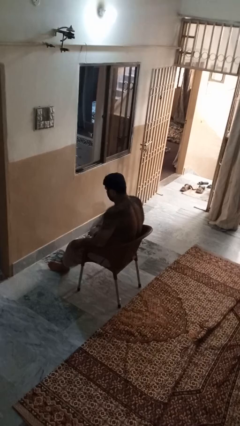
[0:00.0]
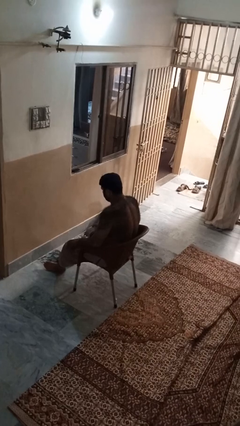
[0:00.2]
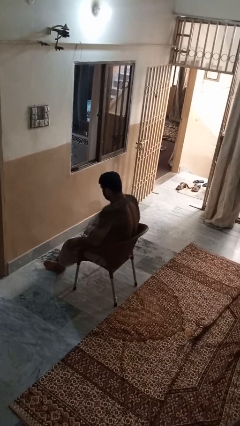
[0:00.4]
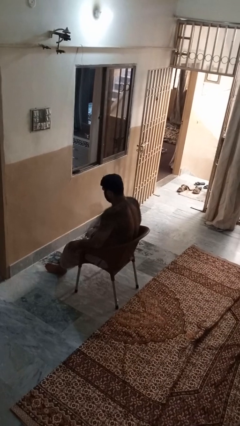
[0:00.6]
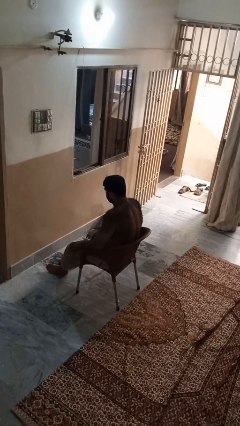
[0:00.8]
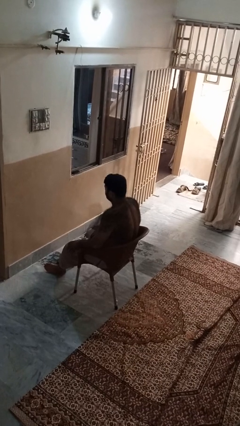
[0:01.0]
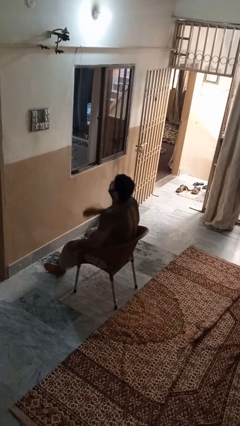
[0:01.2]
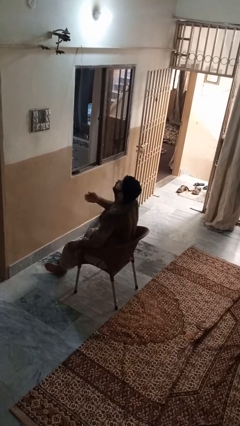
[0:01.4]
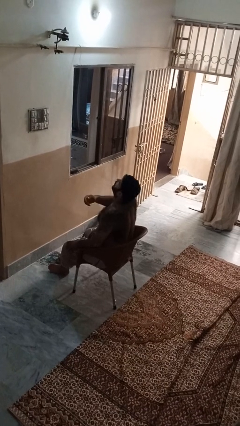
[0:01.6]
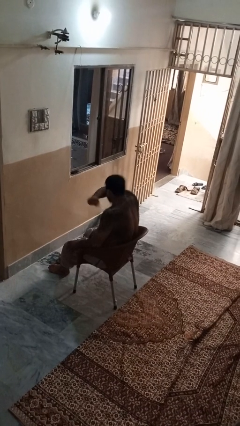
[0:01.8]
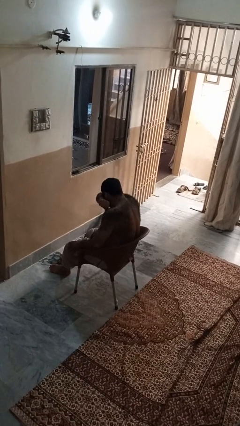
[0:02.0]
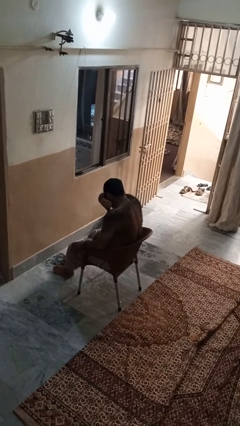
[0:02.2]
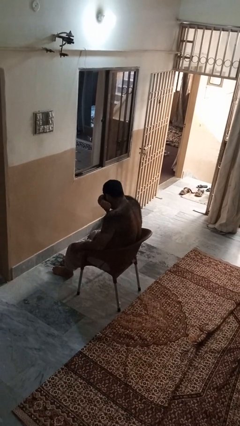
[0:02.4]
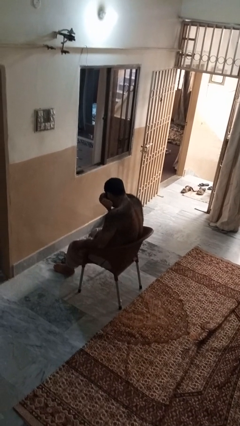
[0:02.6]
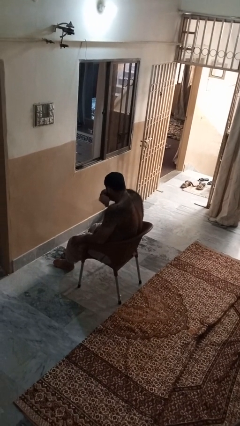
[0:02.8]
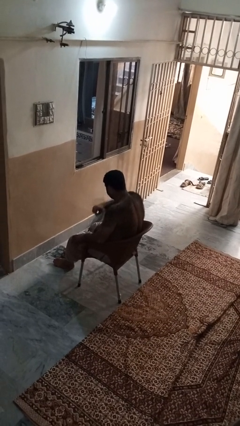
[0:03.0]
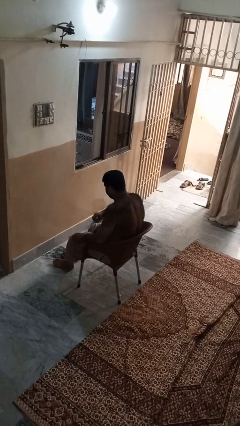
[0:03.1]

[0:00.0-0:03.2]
person sneezes into arm

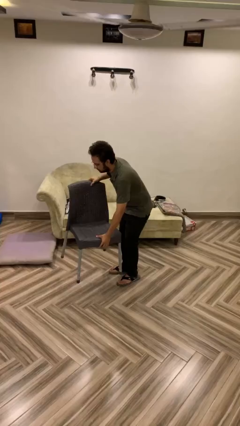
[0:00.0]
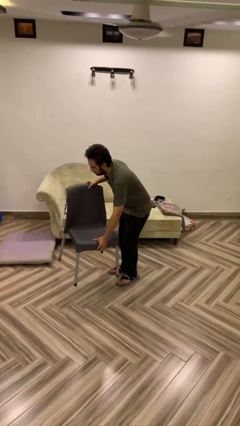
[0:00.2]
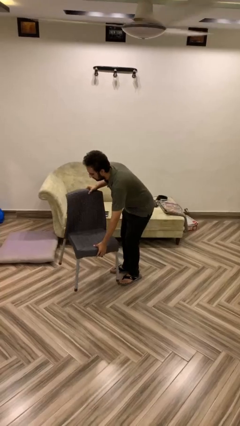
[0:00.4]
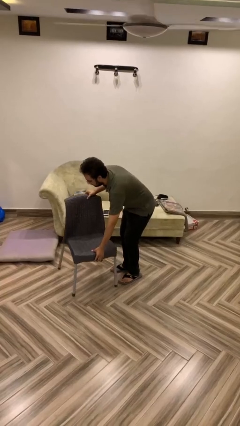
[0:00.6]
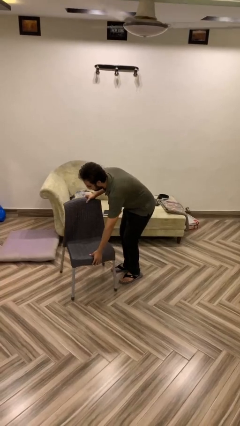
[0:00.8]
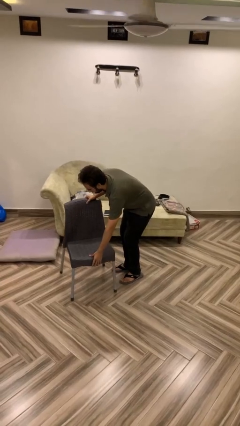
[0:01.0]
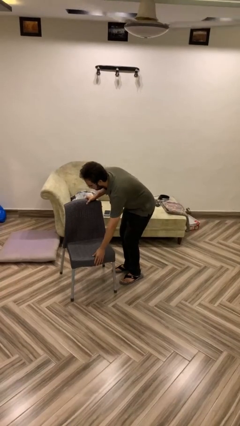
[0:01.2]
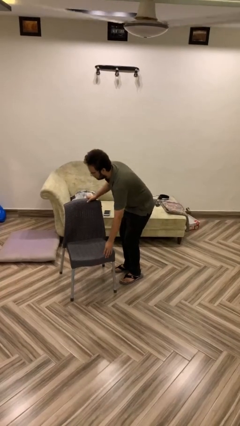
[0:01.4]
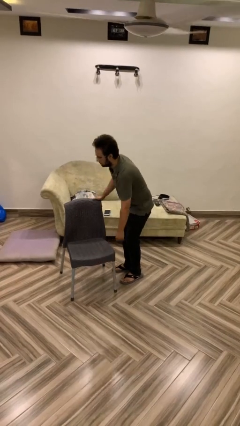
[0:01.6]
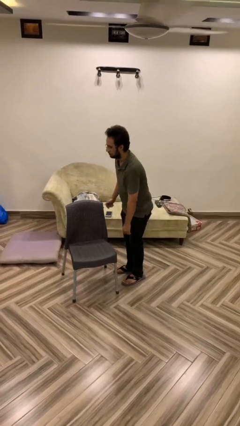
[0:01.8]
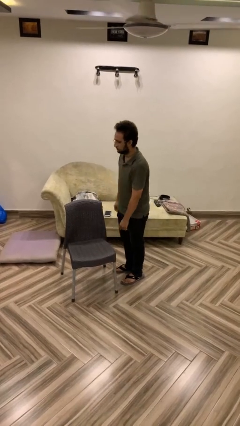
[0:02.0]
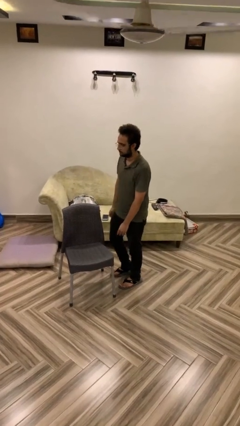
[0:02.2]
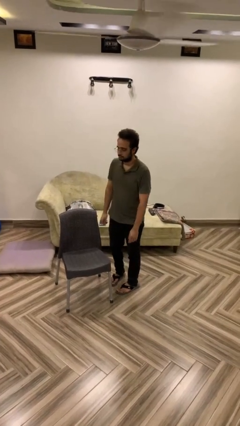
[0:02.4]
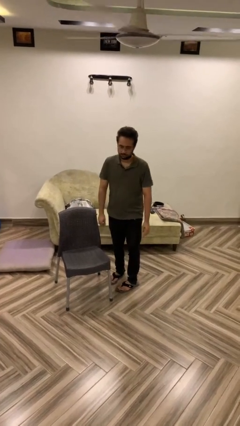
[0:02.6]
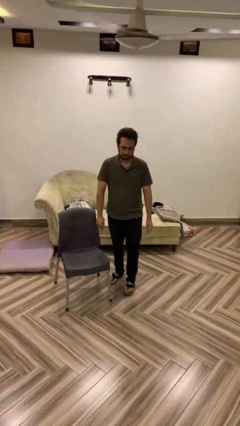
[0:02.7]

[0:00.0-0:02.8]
person puts down object on floor

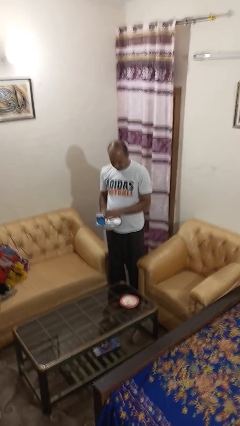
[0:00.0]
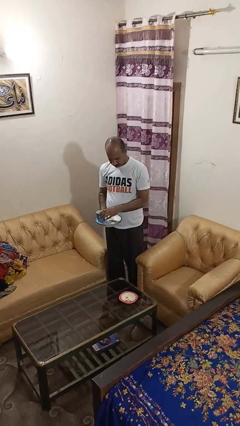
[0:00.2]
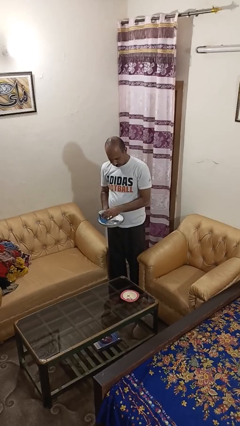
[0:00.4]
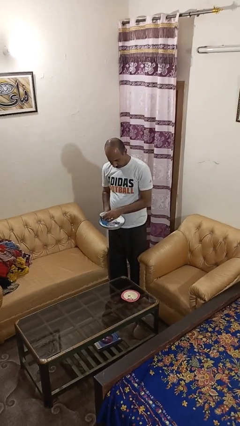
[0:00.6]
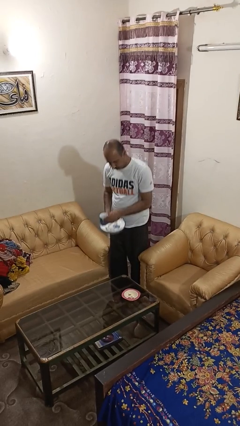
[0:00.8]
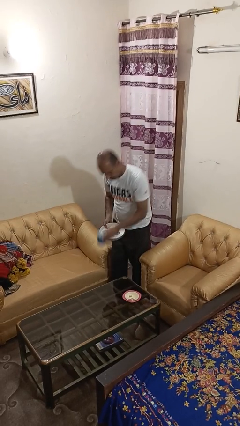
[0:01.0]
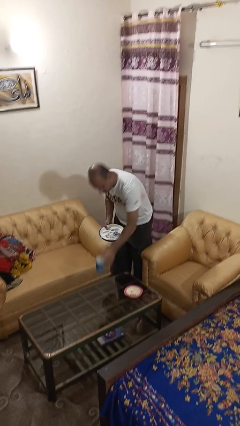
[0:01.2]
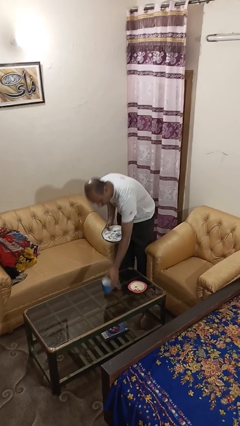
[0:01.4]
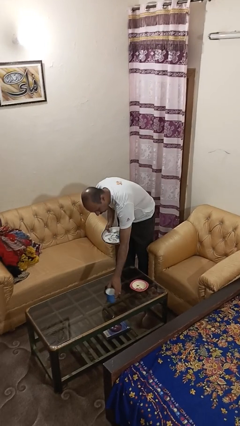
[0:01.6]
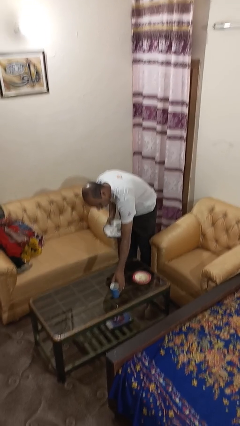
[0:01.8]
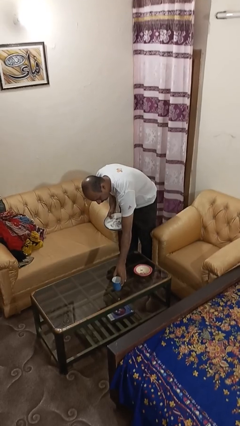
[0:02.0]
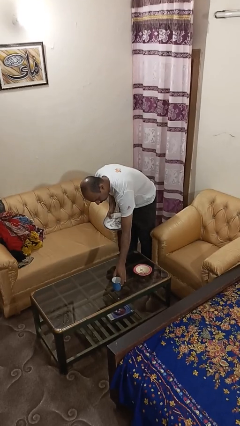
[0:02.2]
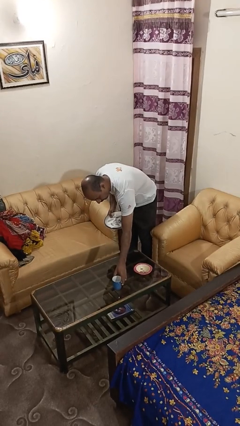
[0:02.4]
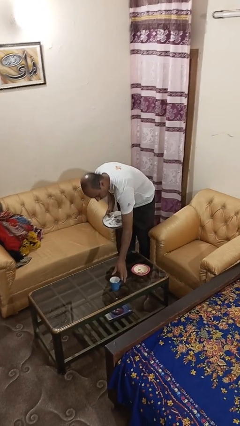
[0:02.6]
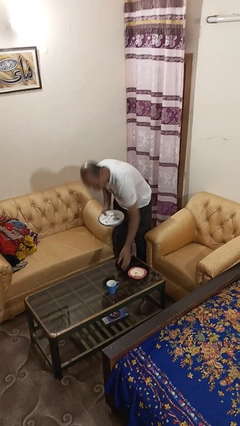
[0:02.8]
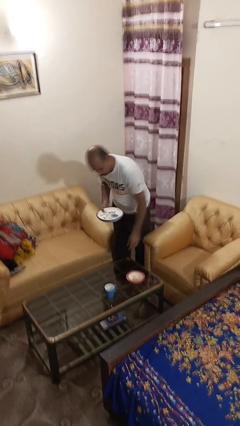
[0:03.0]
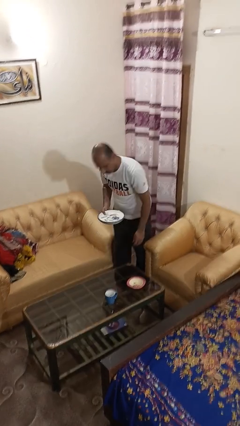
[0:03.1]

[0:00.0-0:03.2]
person sets table

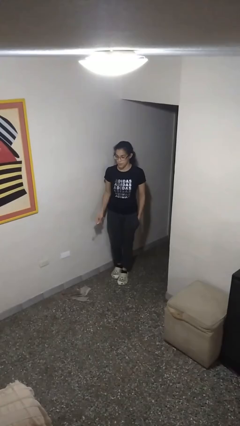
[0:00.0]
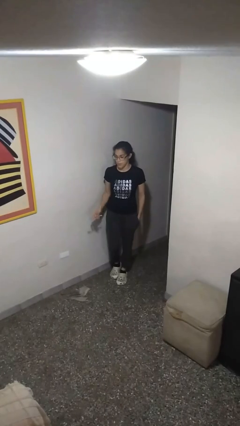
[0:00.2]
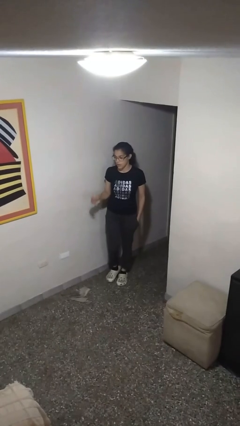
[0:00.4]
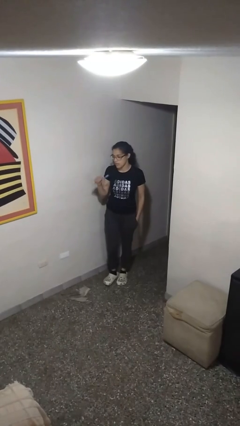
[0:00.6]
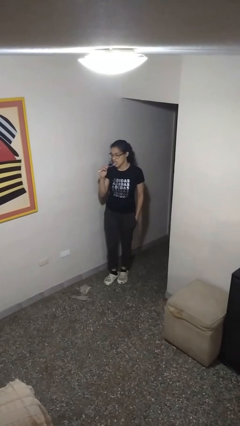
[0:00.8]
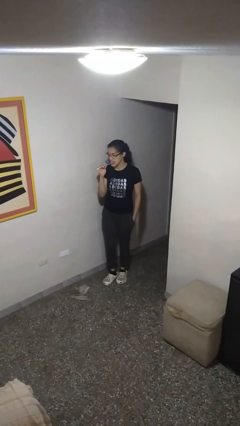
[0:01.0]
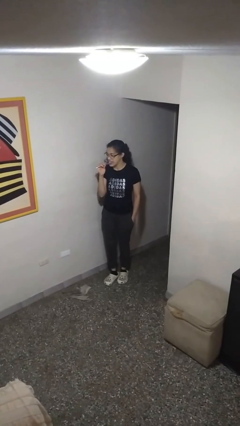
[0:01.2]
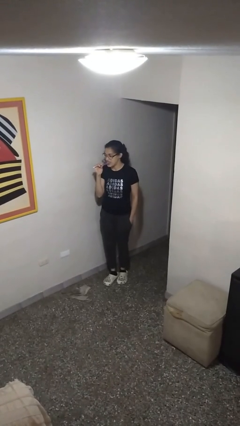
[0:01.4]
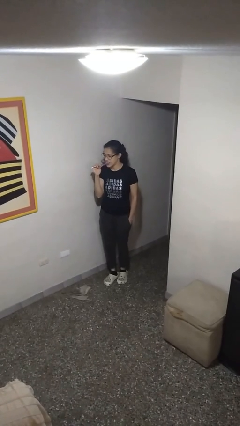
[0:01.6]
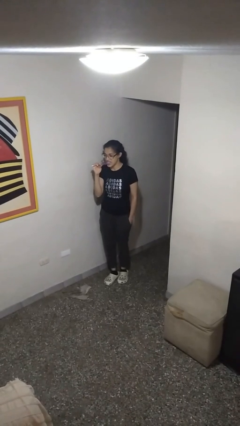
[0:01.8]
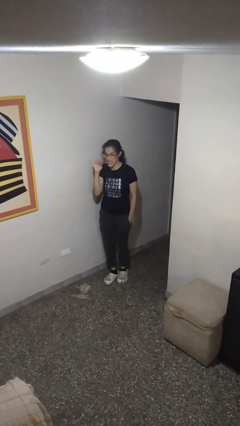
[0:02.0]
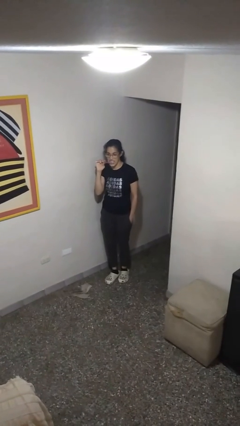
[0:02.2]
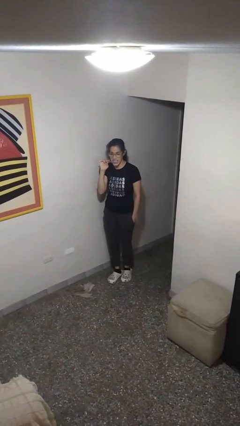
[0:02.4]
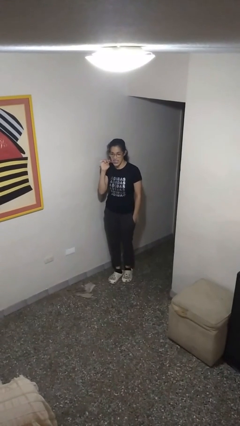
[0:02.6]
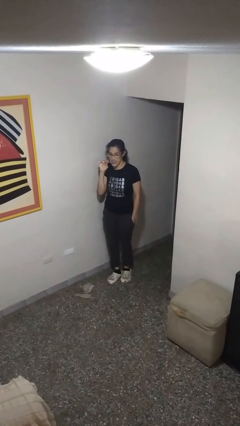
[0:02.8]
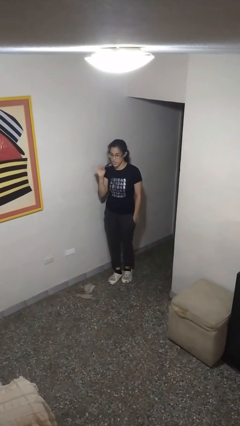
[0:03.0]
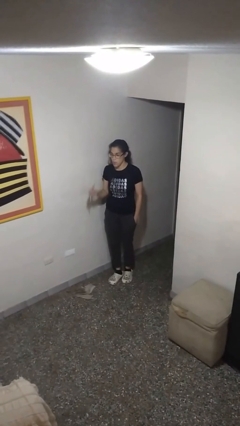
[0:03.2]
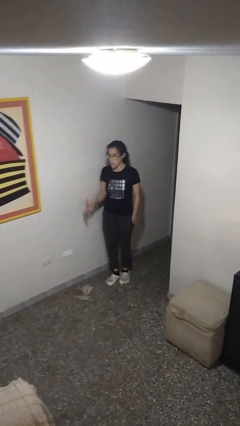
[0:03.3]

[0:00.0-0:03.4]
person brushes teeth

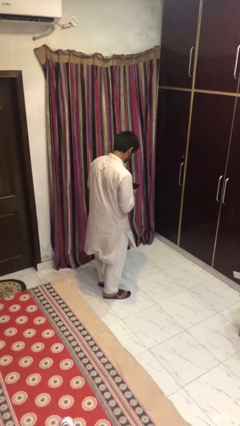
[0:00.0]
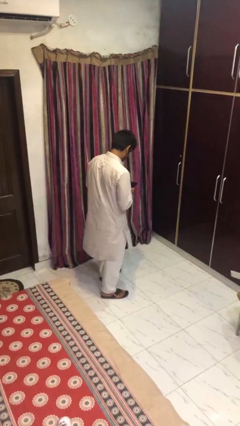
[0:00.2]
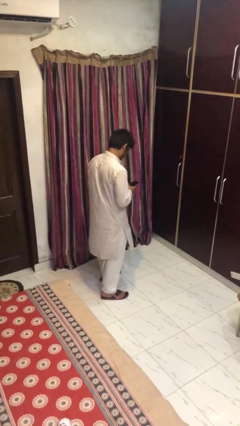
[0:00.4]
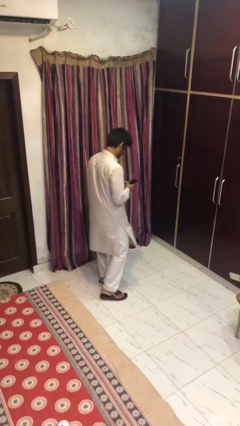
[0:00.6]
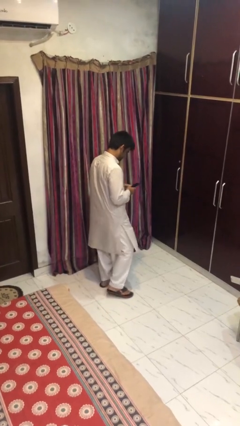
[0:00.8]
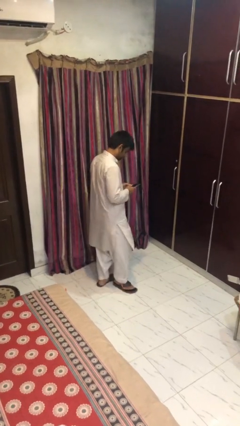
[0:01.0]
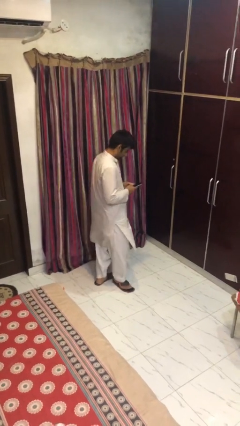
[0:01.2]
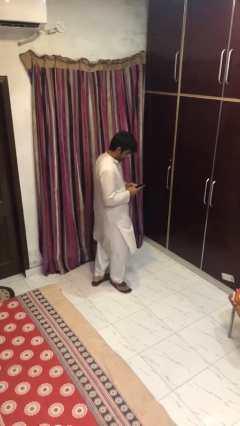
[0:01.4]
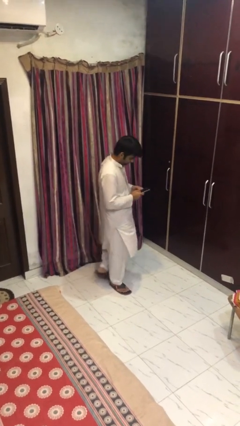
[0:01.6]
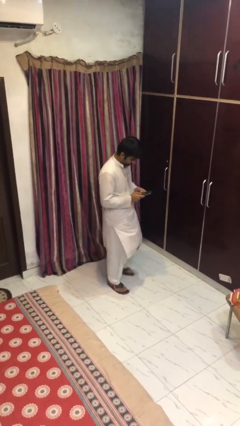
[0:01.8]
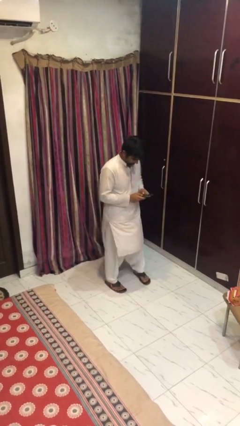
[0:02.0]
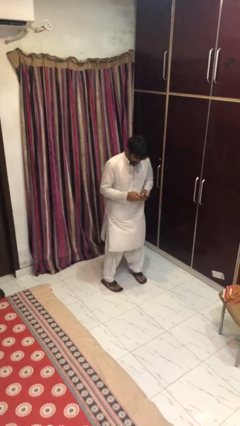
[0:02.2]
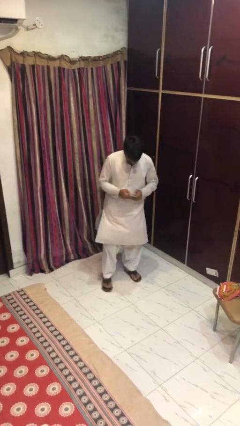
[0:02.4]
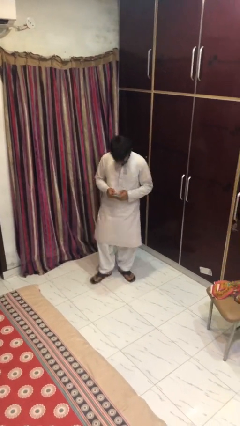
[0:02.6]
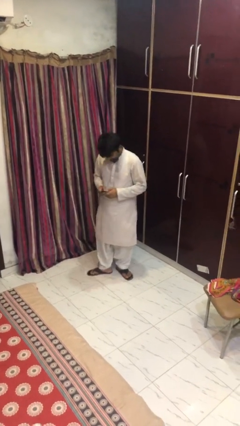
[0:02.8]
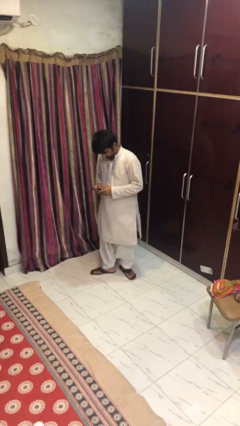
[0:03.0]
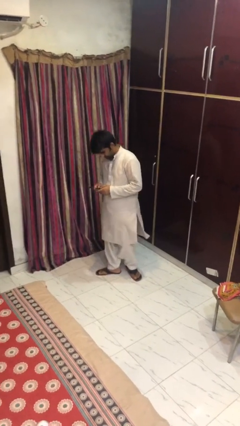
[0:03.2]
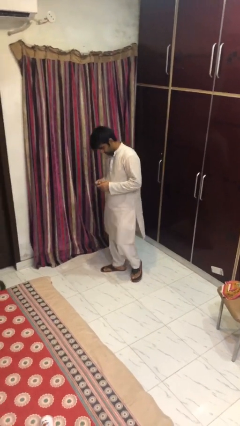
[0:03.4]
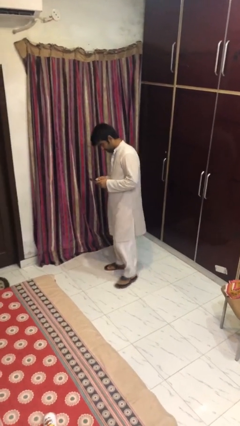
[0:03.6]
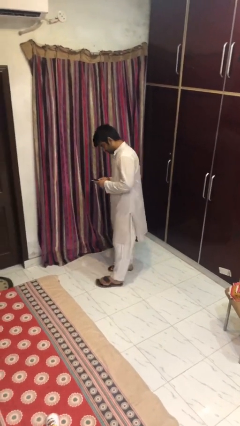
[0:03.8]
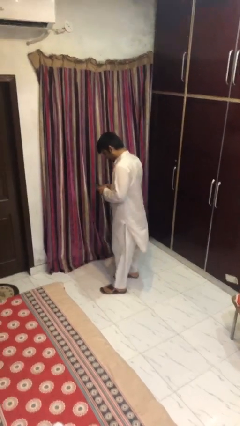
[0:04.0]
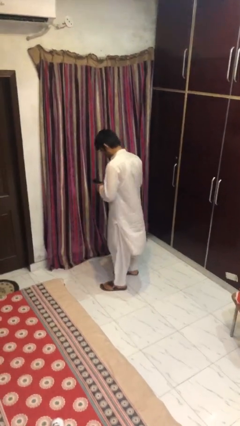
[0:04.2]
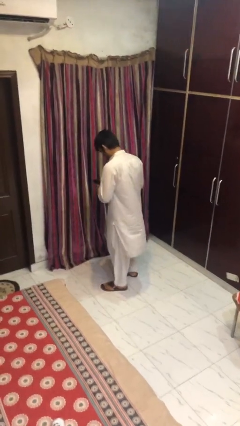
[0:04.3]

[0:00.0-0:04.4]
person texts on phone

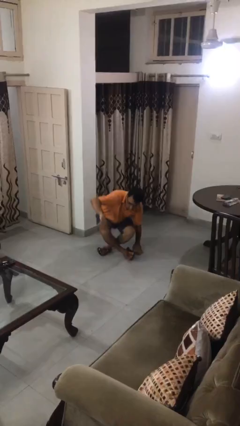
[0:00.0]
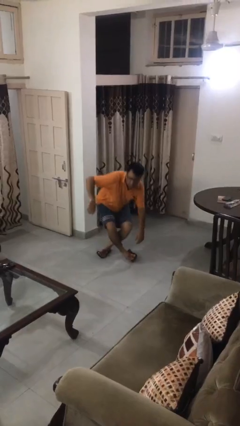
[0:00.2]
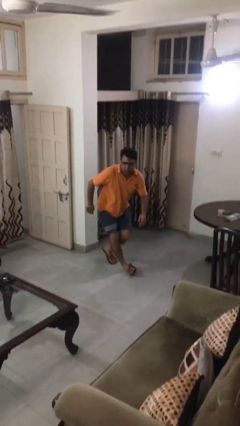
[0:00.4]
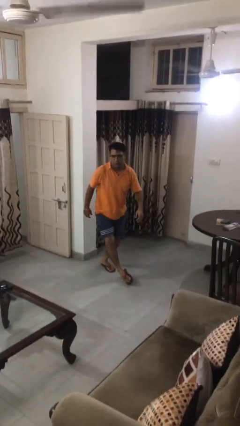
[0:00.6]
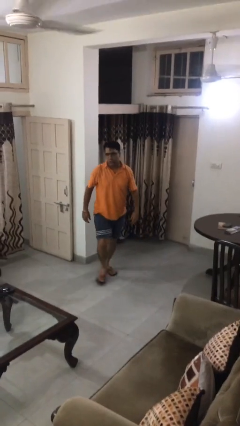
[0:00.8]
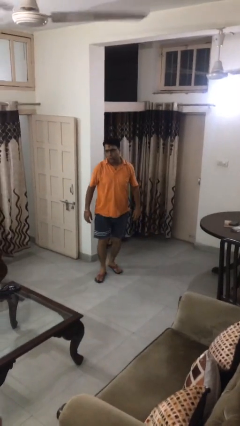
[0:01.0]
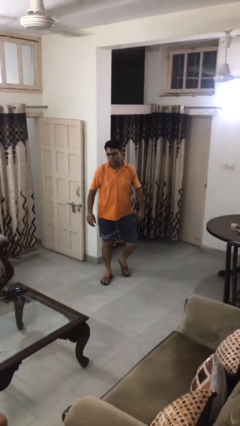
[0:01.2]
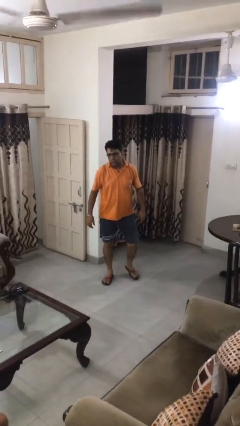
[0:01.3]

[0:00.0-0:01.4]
person stands up from floor
